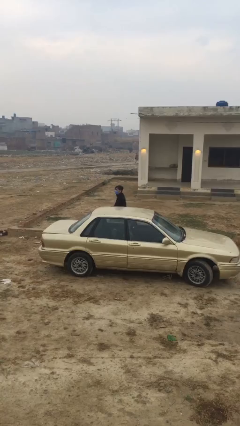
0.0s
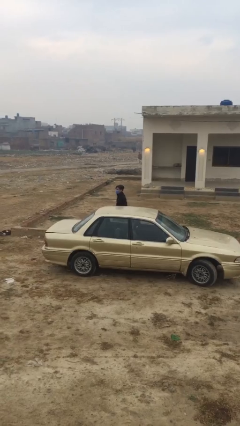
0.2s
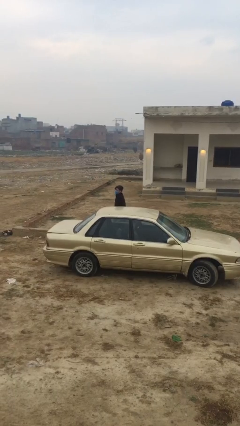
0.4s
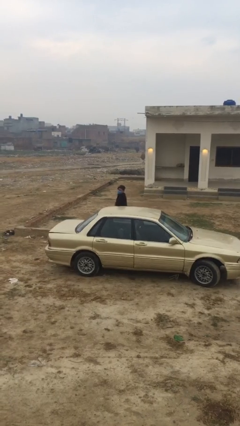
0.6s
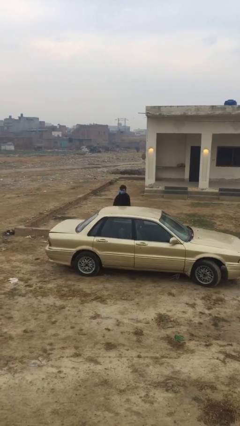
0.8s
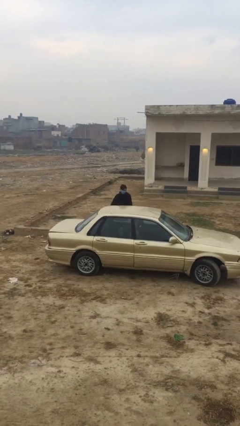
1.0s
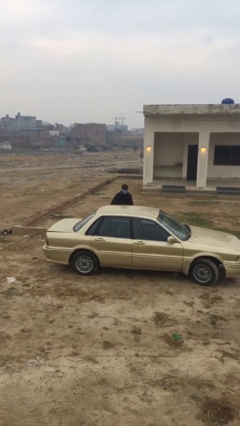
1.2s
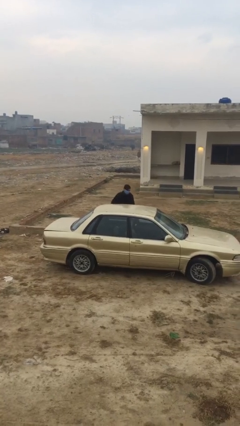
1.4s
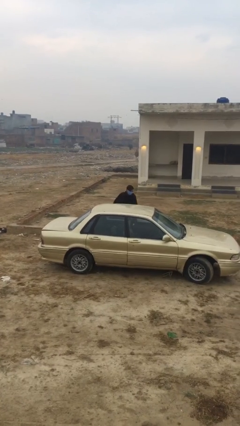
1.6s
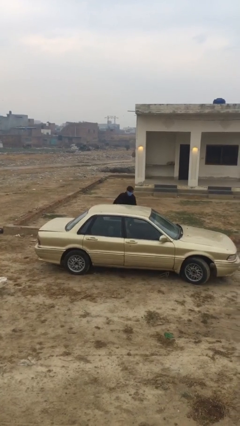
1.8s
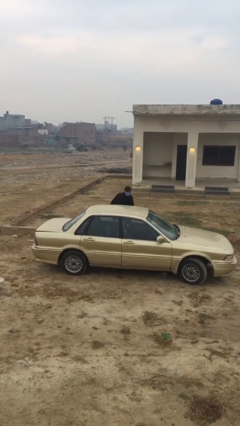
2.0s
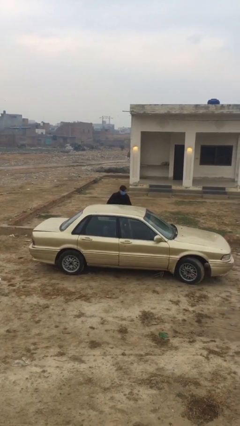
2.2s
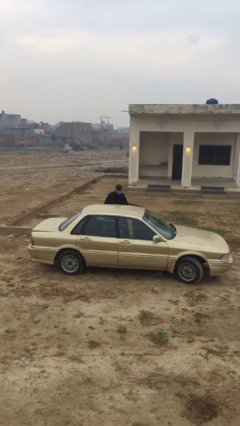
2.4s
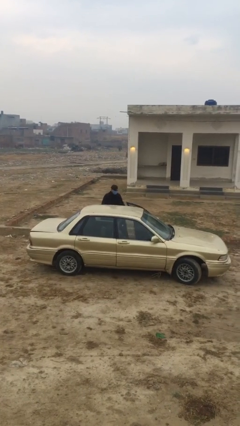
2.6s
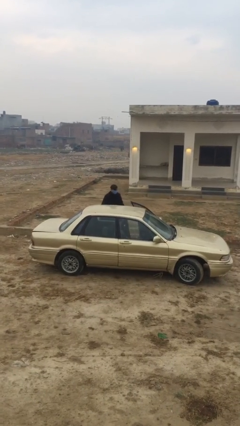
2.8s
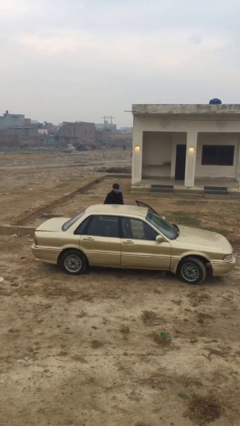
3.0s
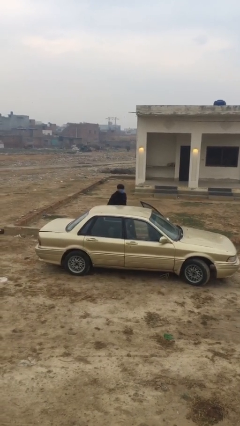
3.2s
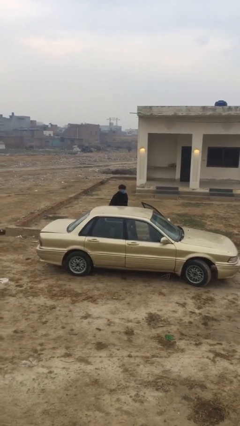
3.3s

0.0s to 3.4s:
person opens car door

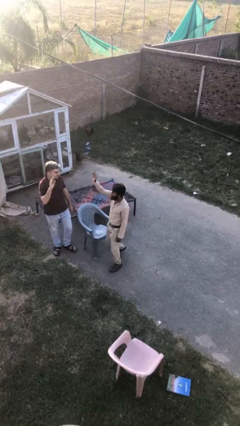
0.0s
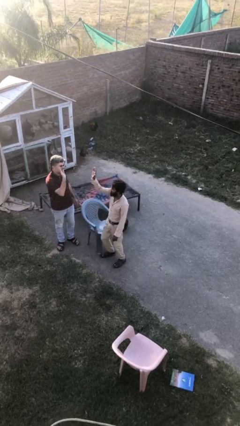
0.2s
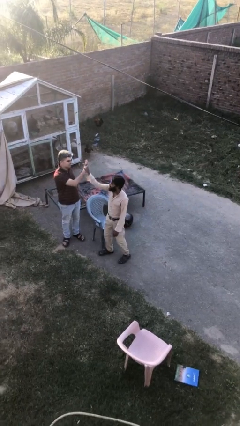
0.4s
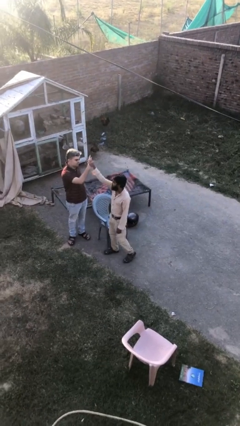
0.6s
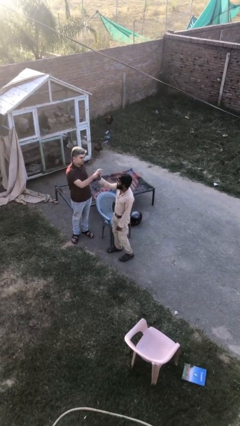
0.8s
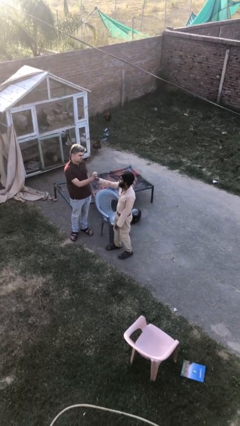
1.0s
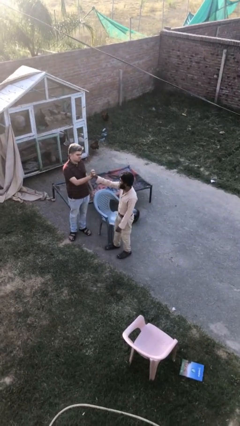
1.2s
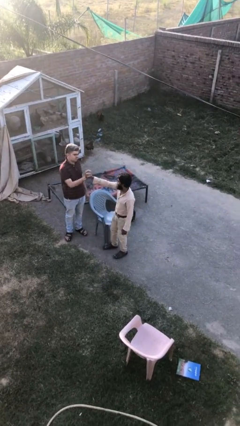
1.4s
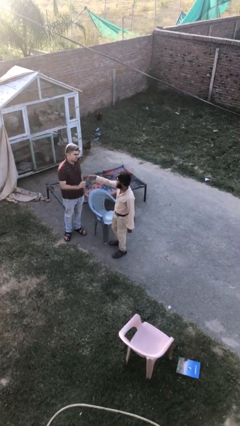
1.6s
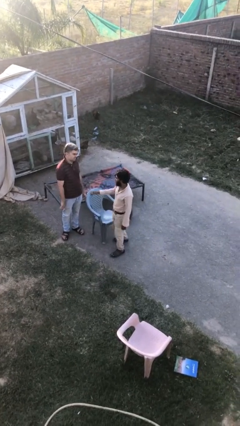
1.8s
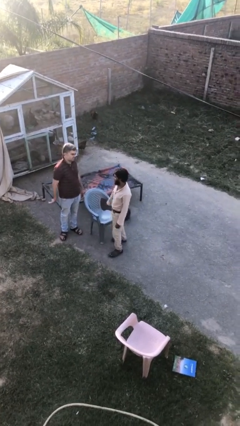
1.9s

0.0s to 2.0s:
person highfives hand

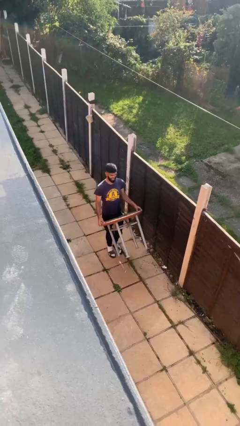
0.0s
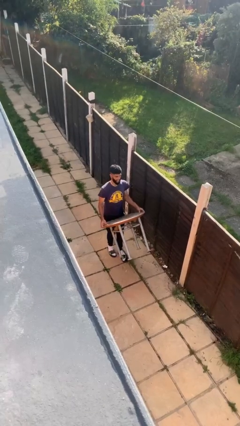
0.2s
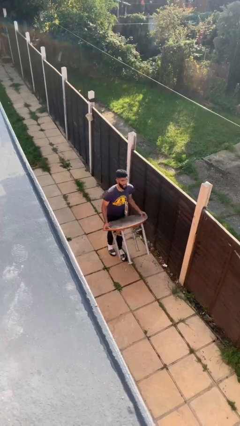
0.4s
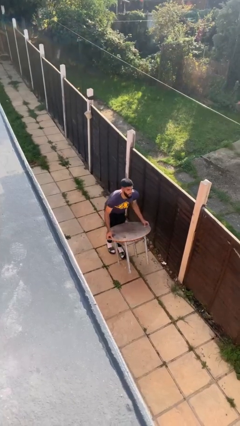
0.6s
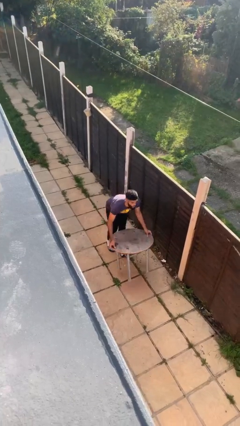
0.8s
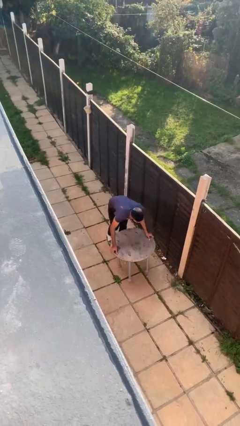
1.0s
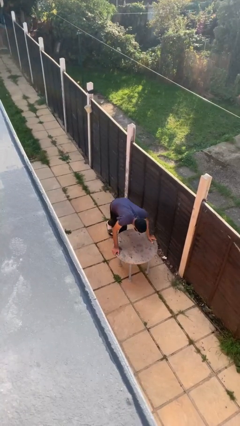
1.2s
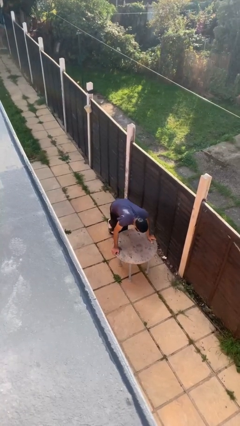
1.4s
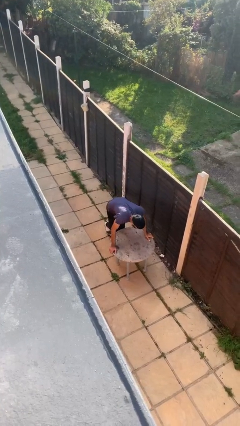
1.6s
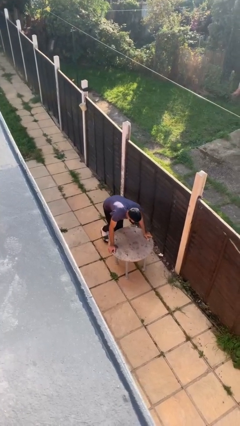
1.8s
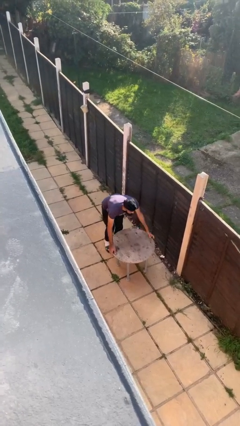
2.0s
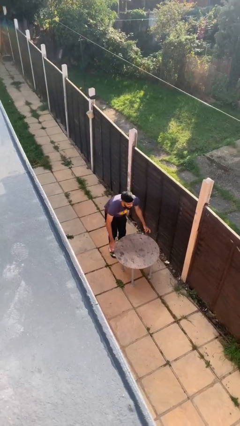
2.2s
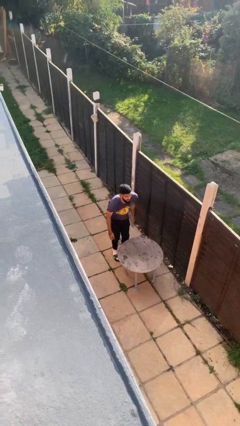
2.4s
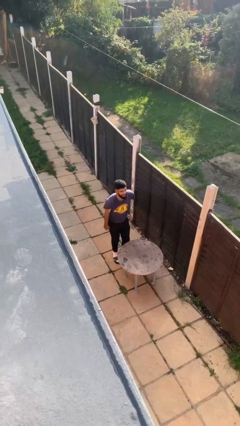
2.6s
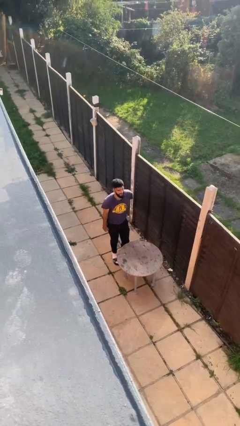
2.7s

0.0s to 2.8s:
person puts down object on floor

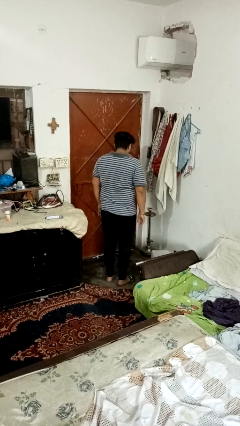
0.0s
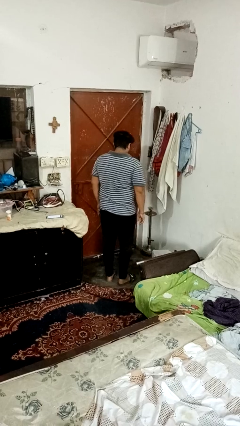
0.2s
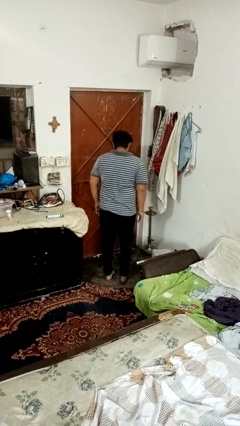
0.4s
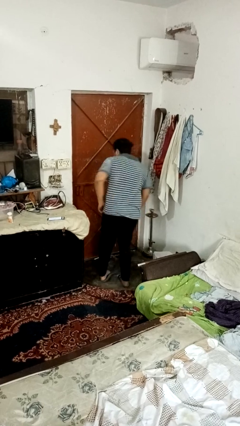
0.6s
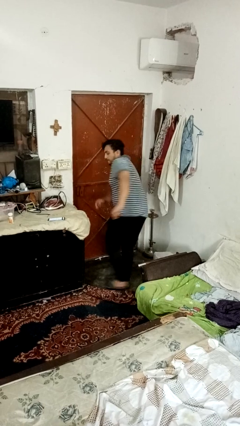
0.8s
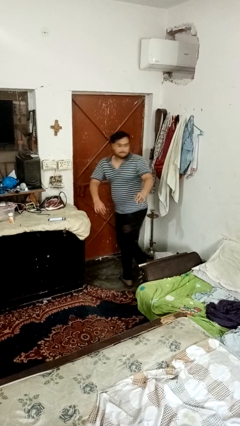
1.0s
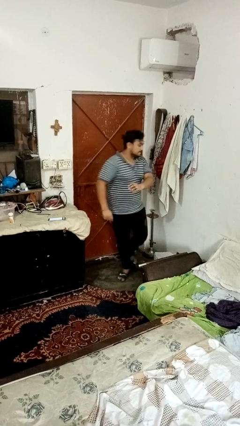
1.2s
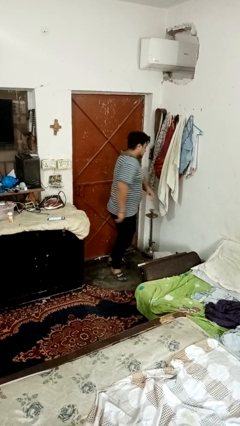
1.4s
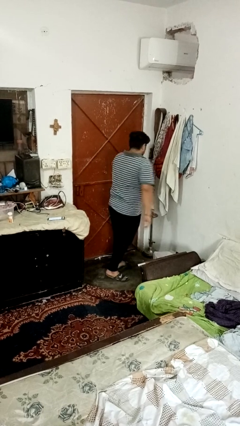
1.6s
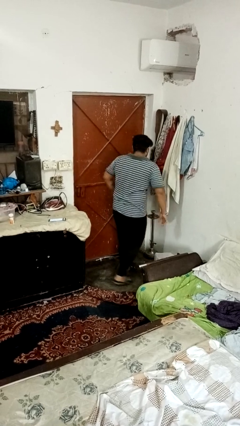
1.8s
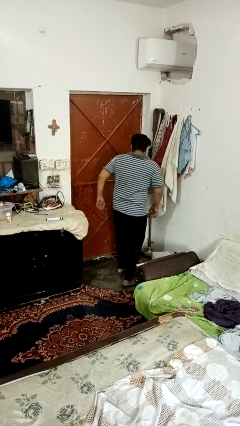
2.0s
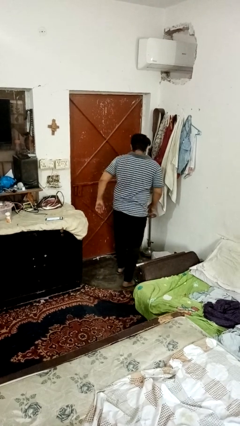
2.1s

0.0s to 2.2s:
person twirls

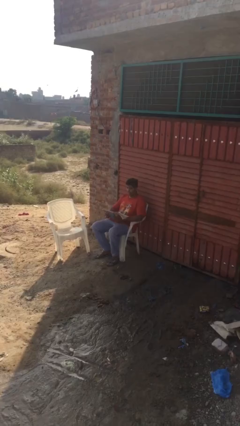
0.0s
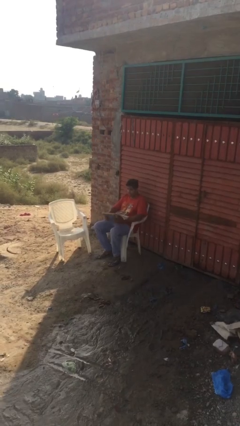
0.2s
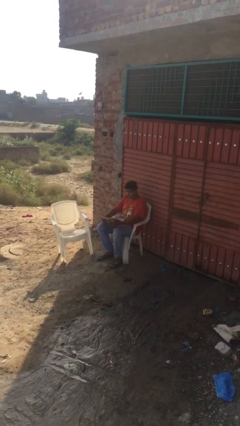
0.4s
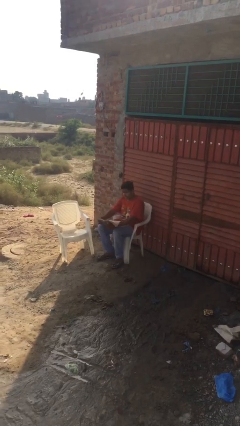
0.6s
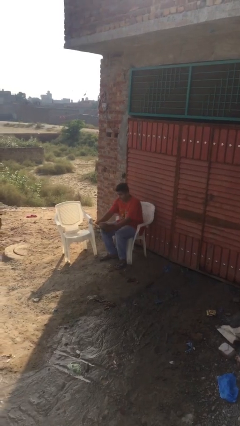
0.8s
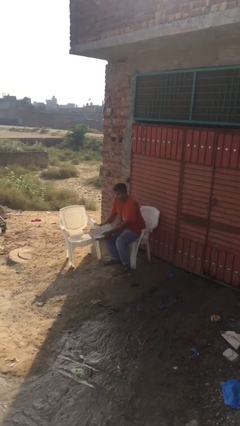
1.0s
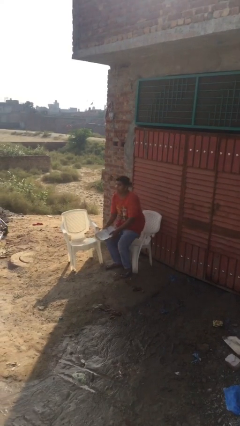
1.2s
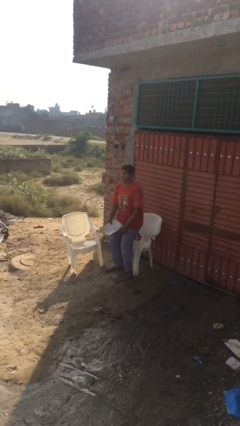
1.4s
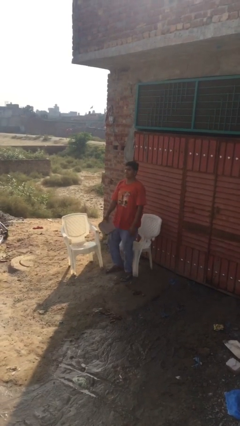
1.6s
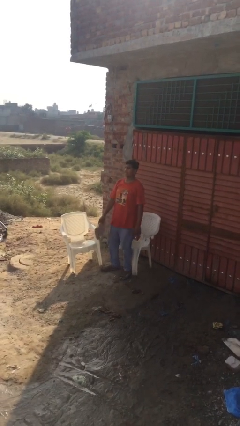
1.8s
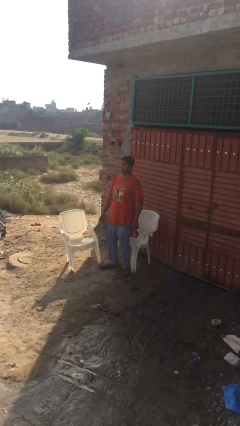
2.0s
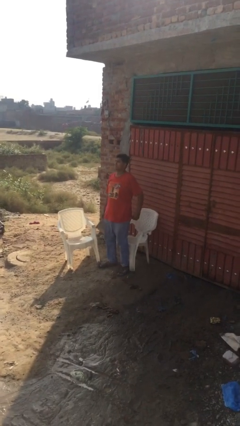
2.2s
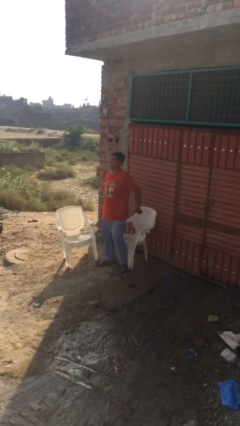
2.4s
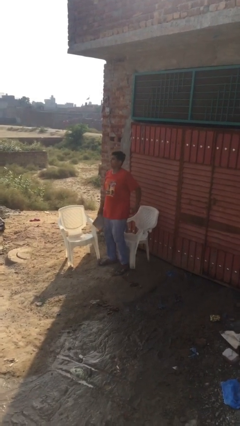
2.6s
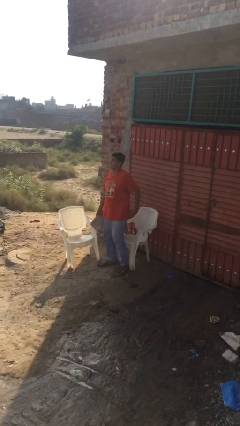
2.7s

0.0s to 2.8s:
person stands up

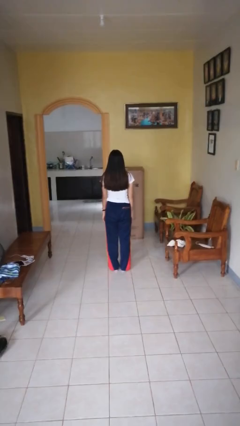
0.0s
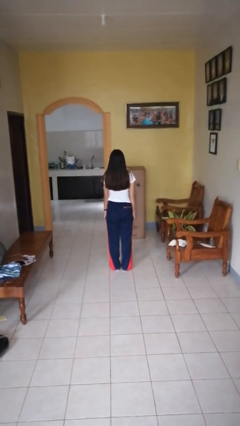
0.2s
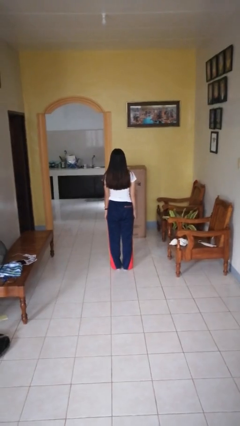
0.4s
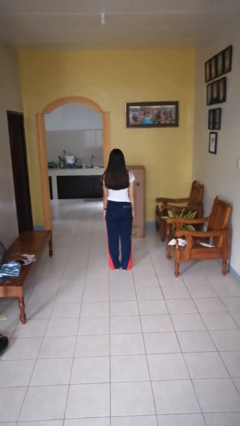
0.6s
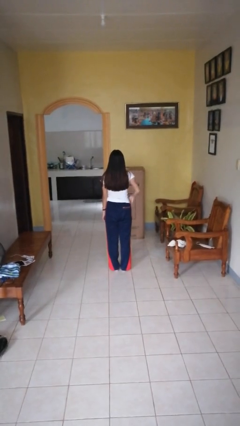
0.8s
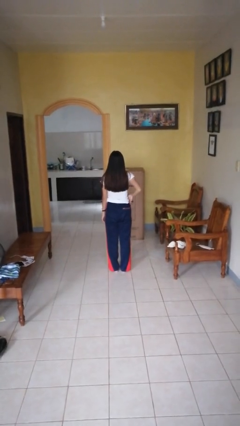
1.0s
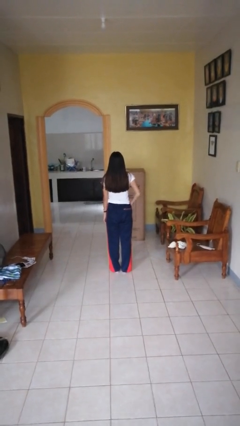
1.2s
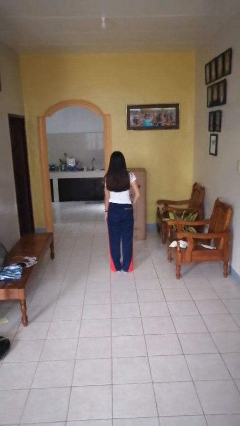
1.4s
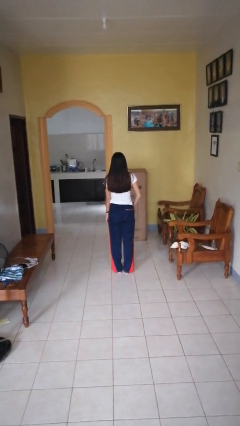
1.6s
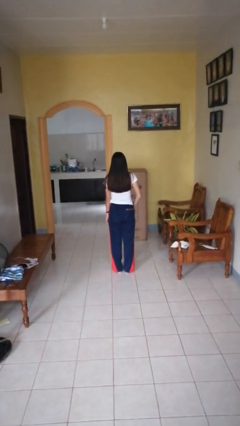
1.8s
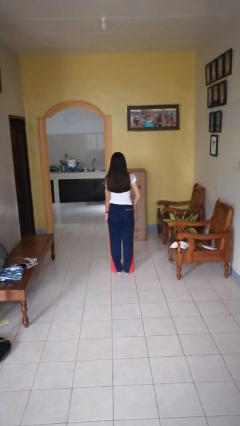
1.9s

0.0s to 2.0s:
person puts hands in back pockets

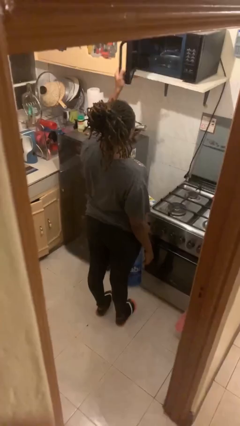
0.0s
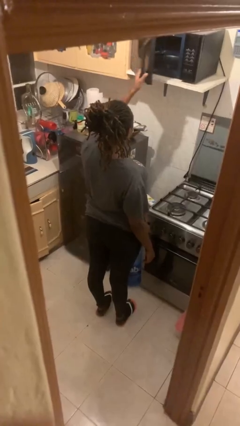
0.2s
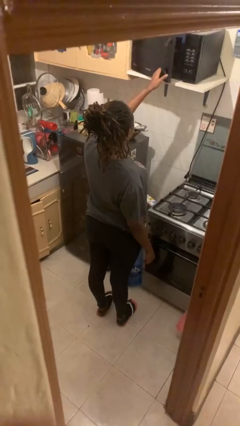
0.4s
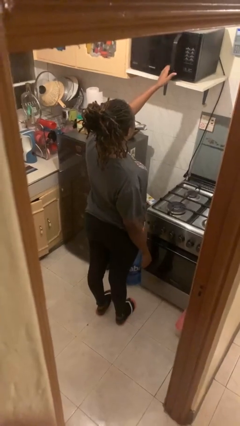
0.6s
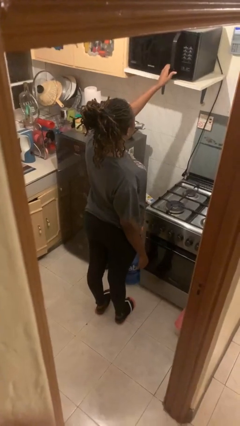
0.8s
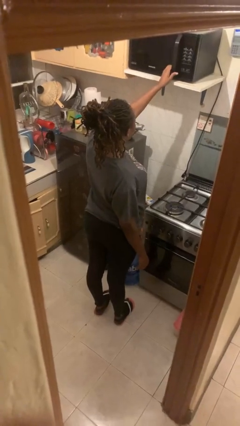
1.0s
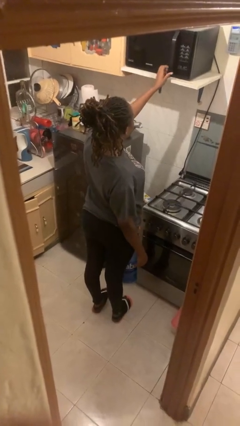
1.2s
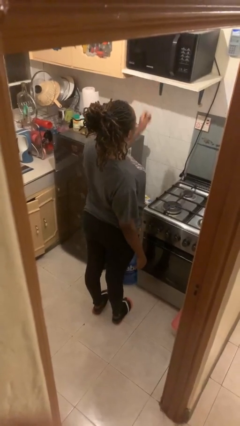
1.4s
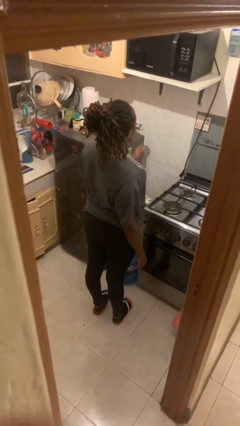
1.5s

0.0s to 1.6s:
person closes microwave

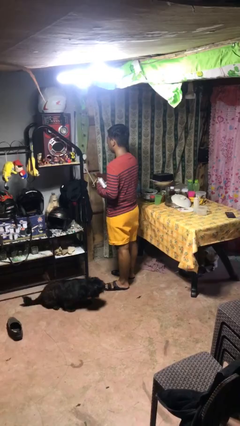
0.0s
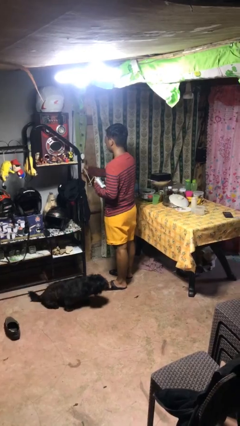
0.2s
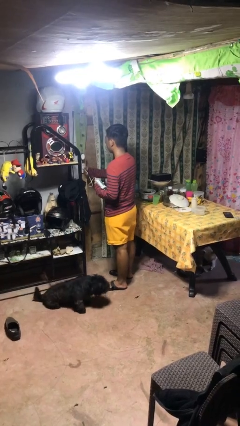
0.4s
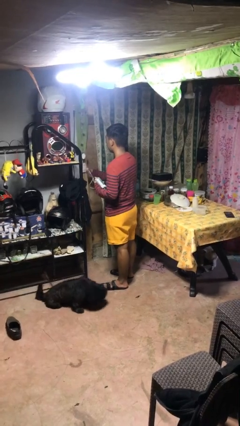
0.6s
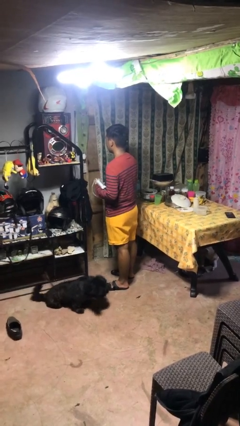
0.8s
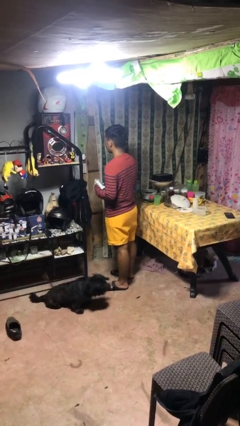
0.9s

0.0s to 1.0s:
person unplugs from electrical socket
